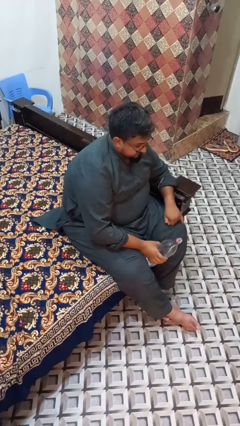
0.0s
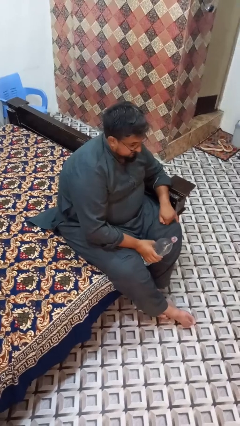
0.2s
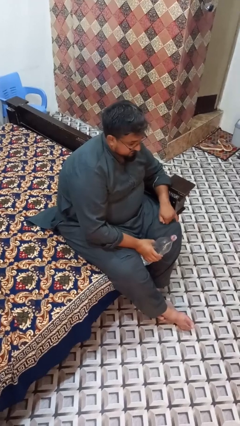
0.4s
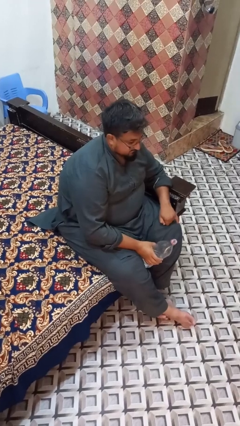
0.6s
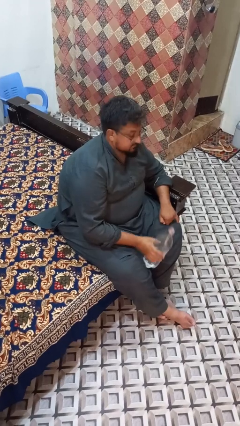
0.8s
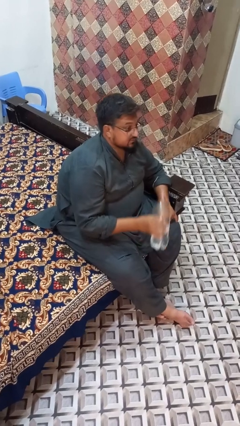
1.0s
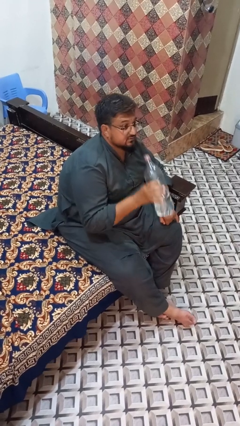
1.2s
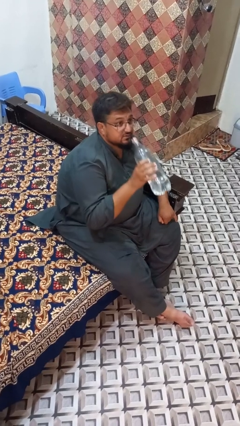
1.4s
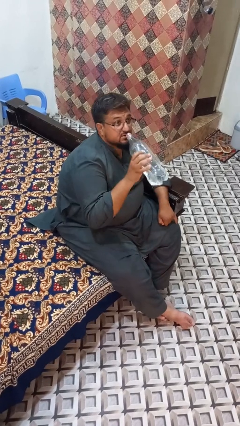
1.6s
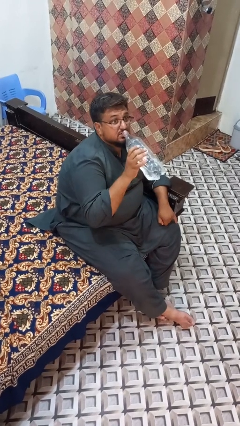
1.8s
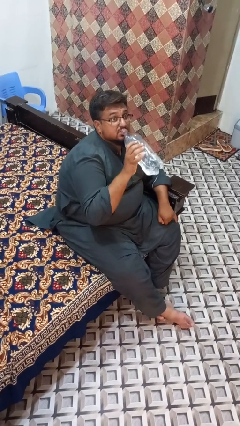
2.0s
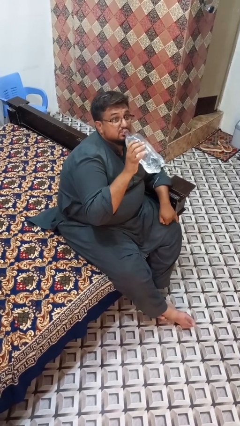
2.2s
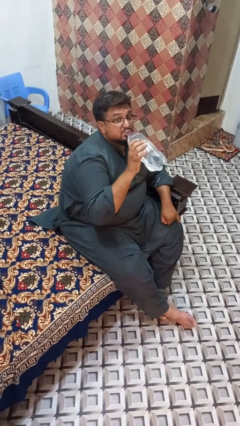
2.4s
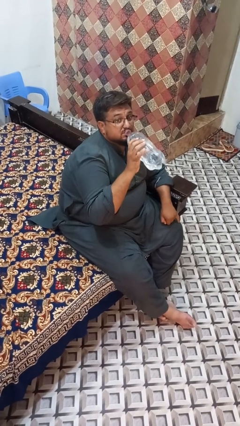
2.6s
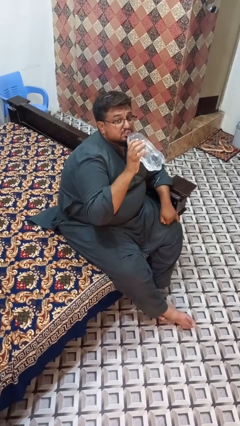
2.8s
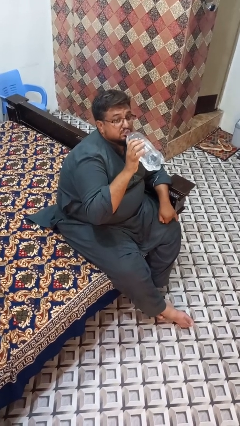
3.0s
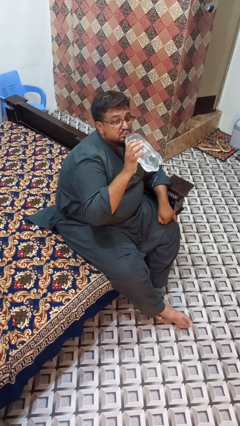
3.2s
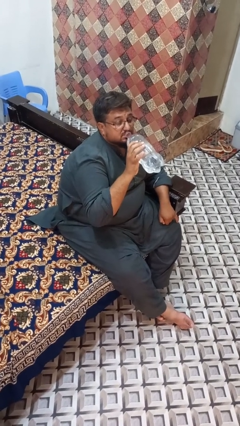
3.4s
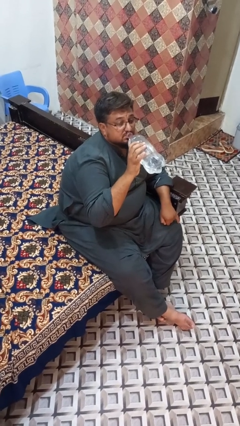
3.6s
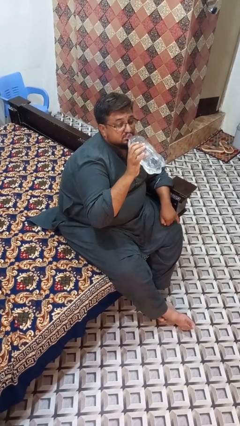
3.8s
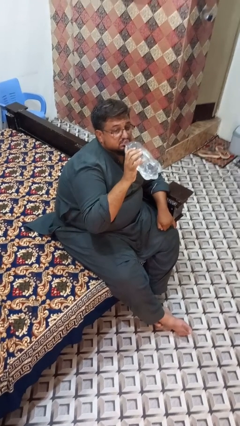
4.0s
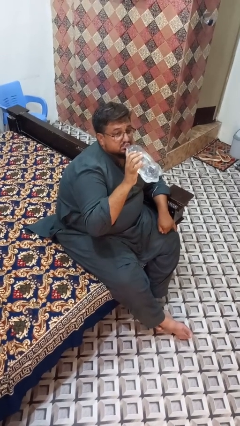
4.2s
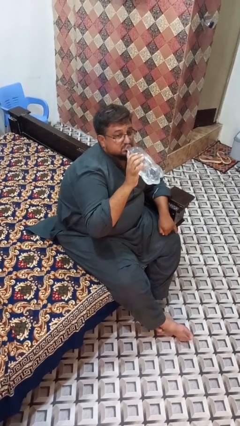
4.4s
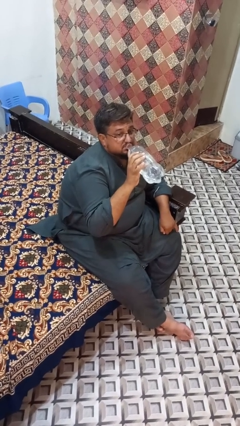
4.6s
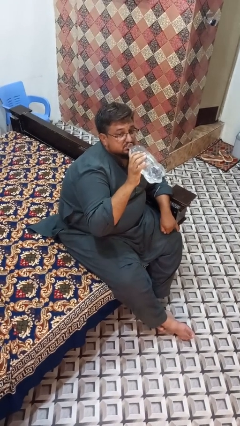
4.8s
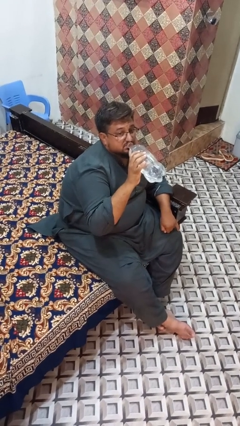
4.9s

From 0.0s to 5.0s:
person drinks from bottle

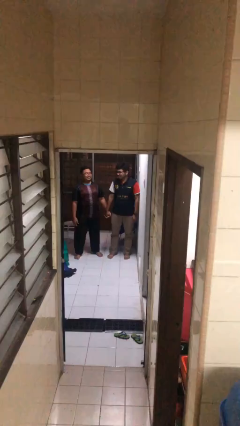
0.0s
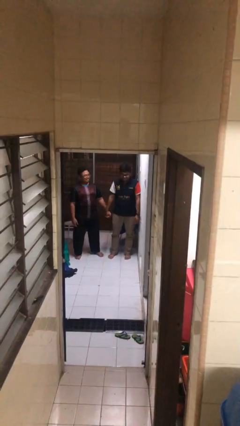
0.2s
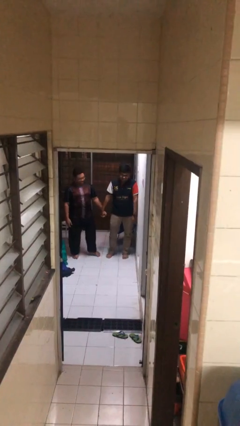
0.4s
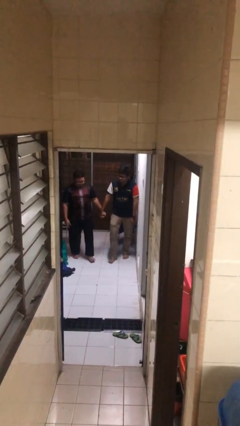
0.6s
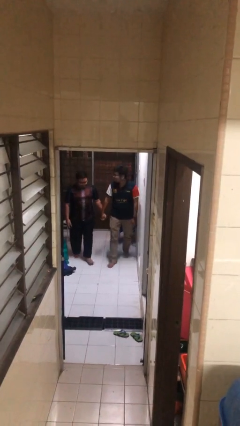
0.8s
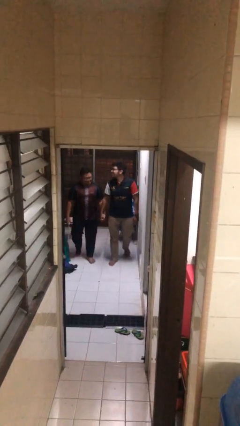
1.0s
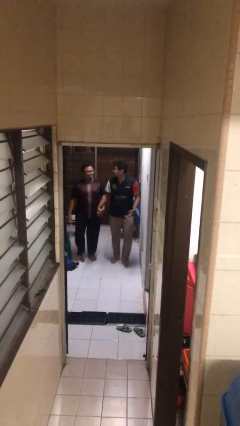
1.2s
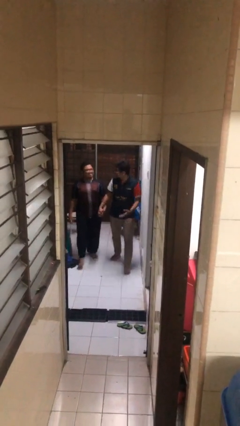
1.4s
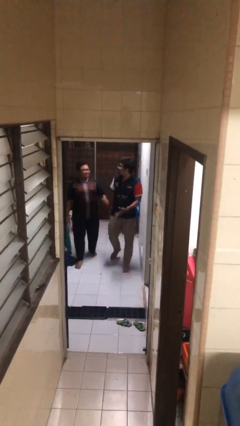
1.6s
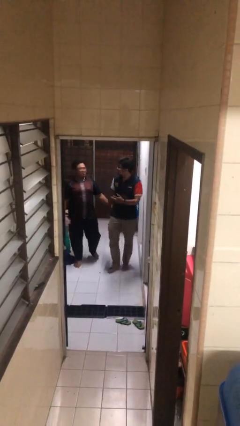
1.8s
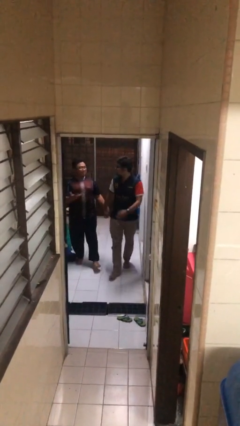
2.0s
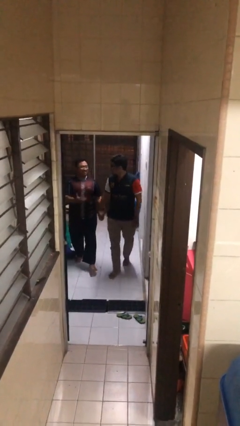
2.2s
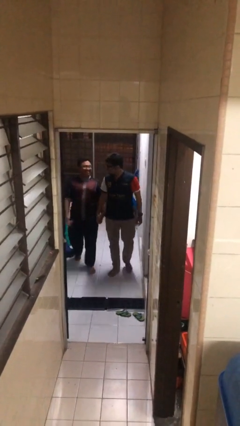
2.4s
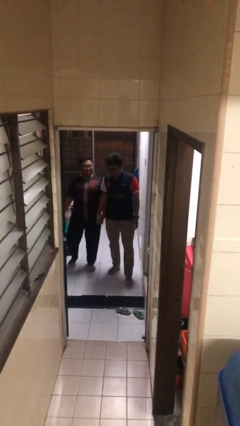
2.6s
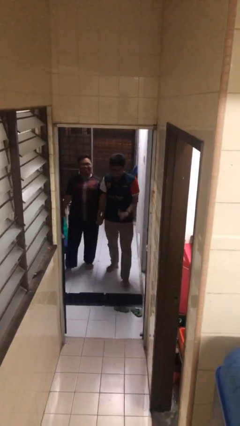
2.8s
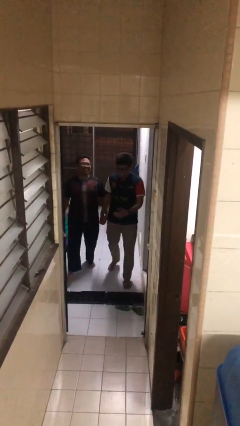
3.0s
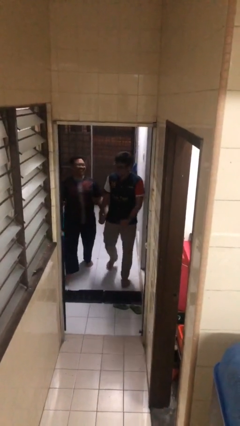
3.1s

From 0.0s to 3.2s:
person holds hand

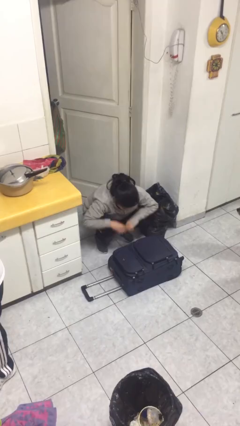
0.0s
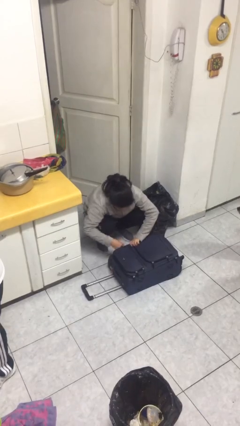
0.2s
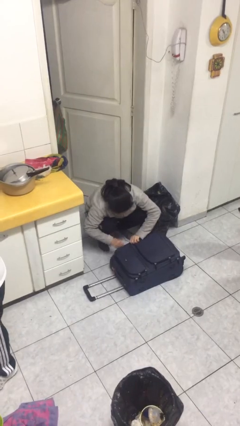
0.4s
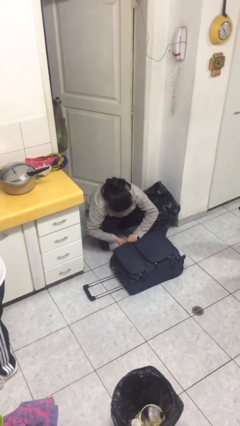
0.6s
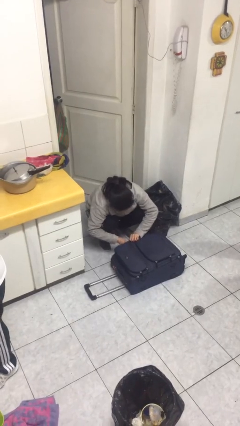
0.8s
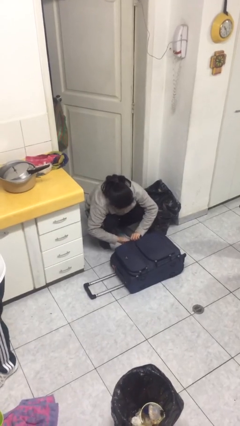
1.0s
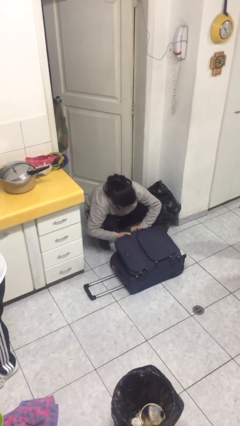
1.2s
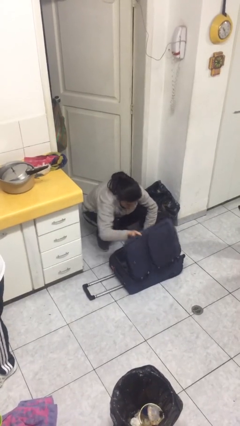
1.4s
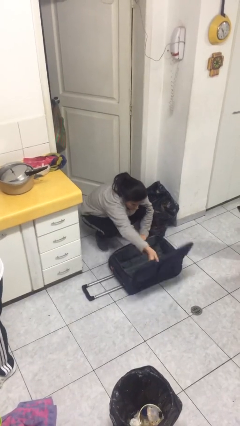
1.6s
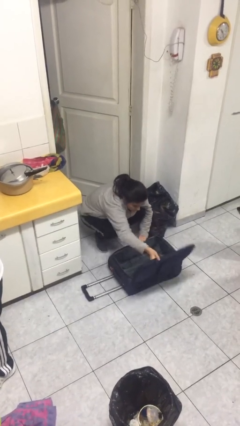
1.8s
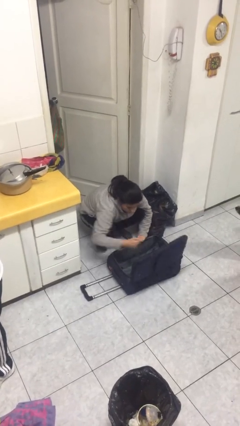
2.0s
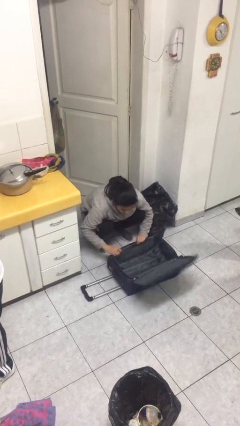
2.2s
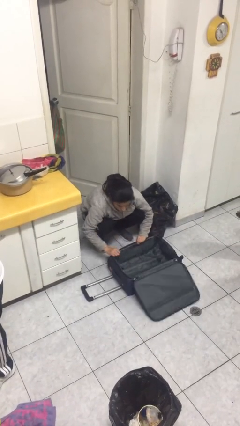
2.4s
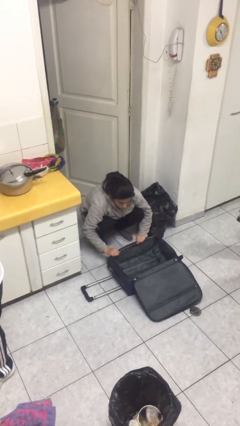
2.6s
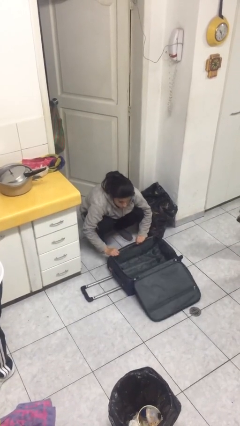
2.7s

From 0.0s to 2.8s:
person opens suitcase

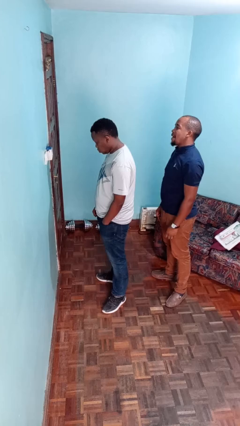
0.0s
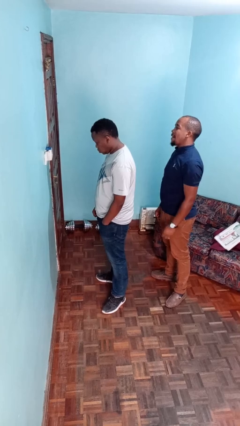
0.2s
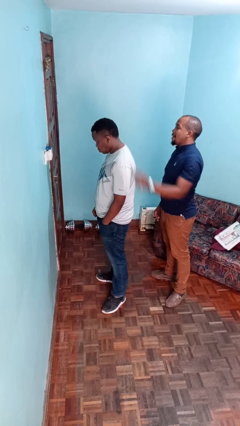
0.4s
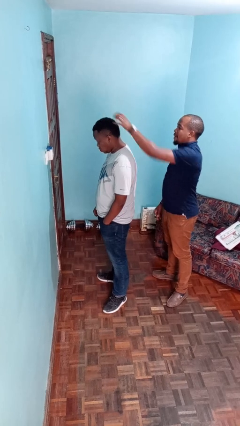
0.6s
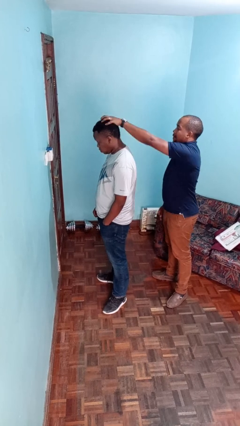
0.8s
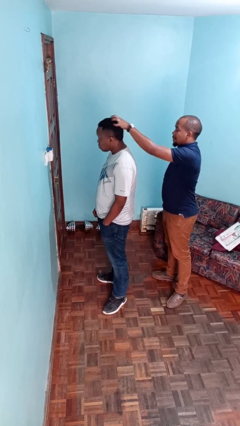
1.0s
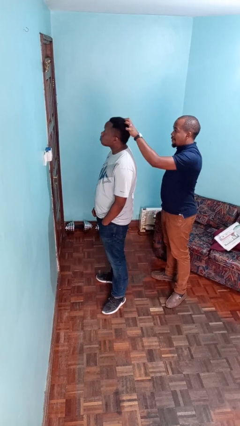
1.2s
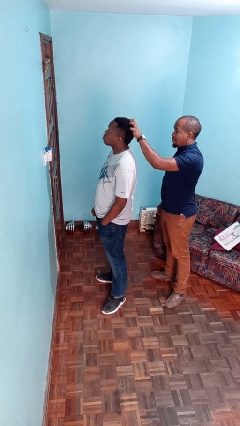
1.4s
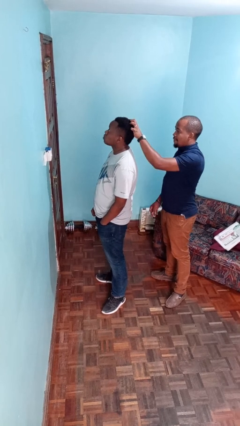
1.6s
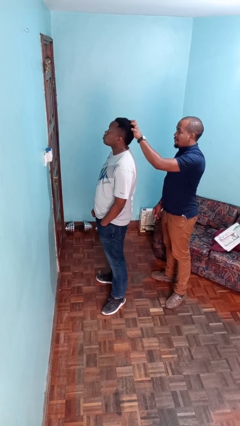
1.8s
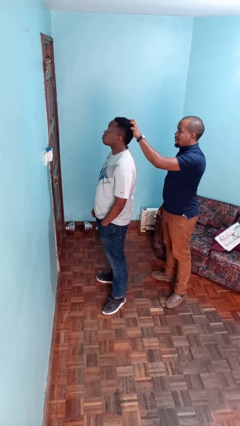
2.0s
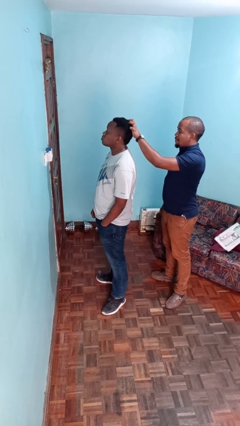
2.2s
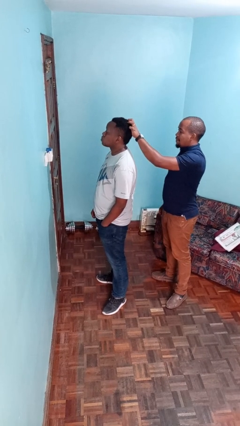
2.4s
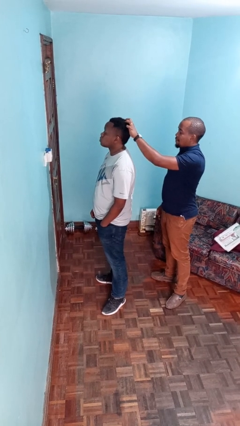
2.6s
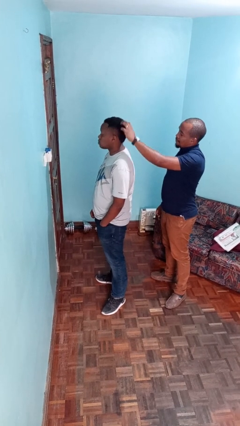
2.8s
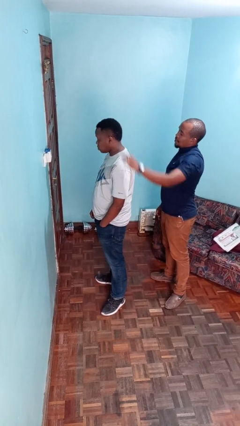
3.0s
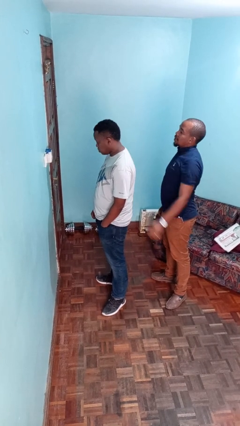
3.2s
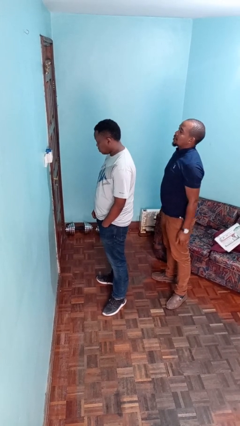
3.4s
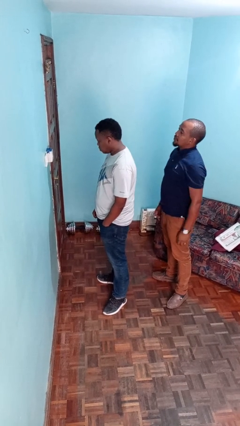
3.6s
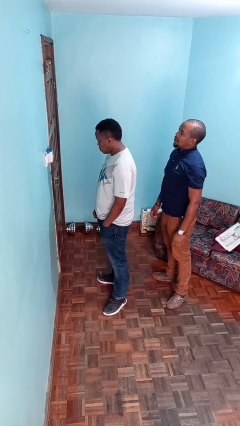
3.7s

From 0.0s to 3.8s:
person grabs person by hair

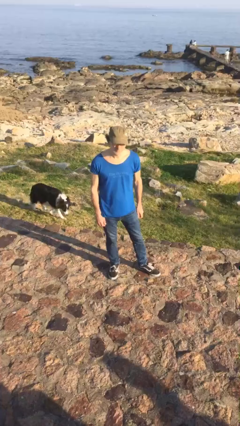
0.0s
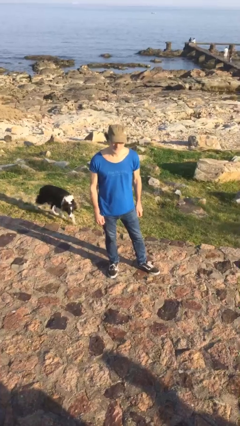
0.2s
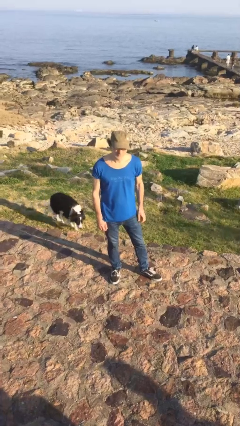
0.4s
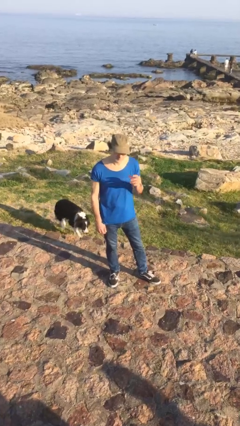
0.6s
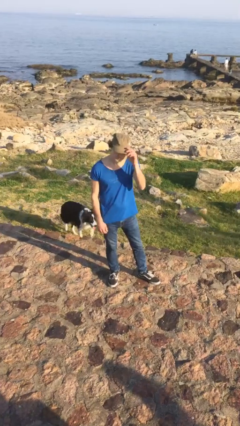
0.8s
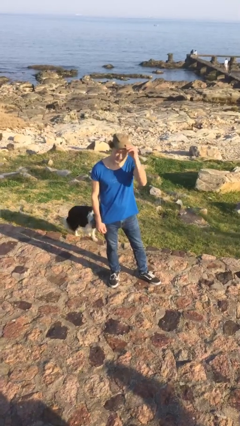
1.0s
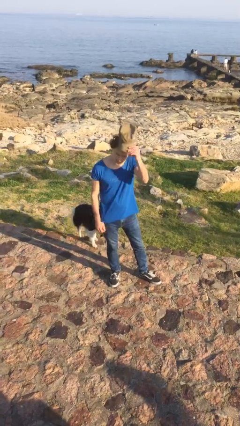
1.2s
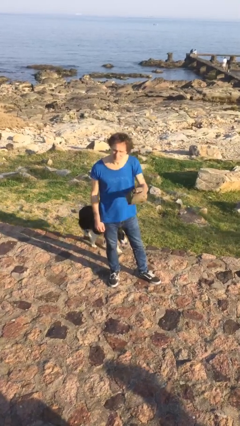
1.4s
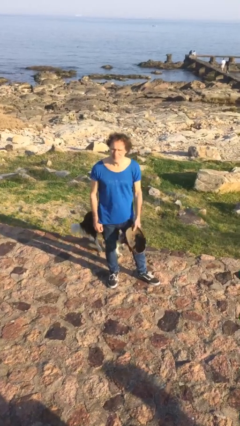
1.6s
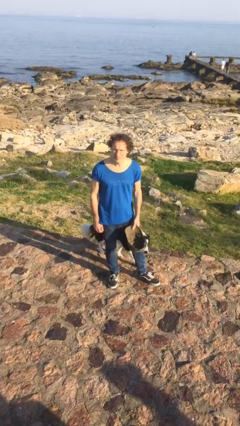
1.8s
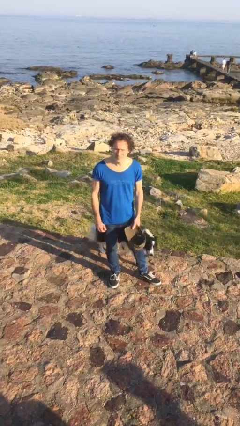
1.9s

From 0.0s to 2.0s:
person takes off hat

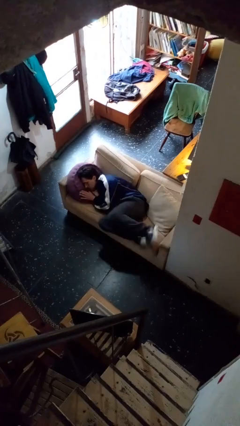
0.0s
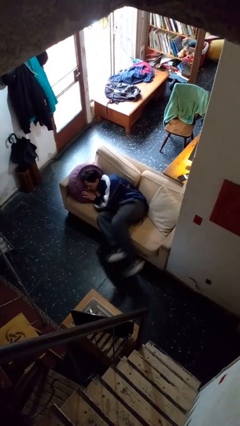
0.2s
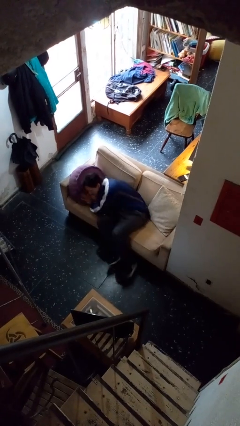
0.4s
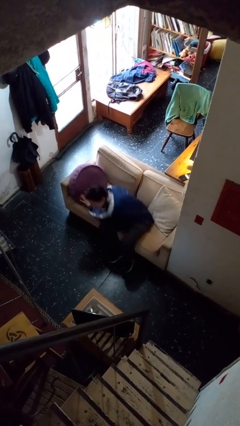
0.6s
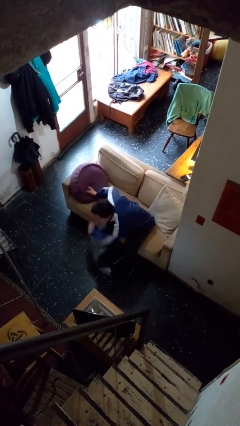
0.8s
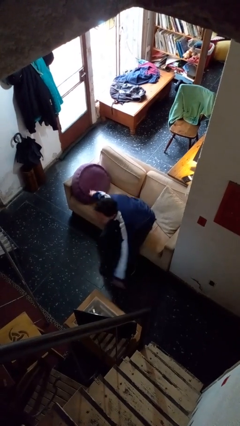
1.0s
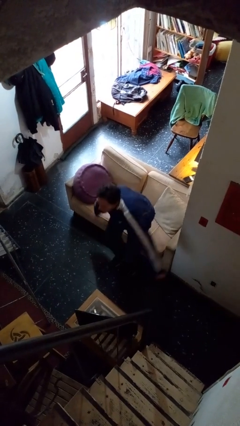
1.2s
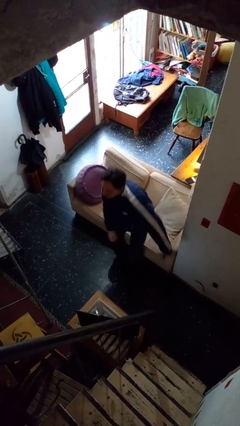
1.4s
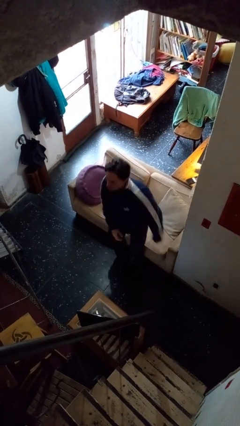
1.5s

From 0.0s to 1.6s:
person stands up
